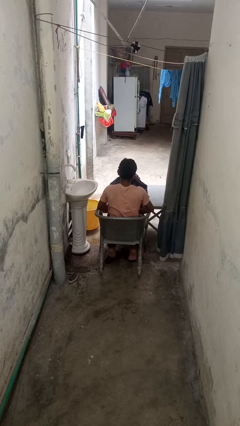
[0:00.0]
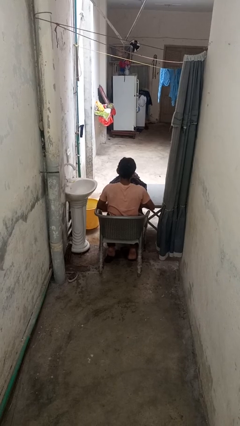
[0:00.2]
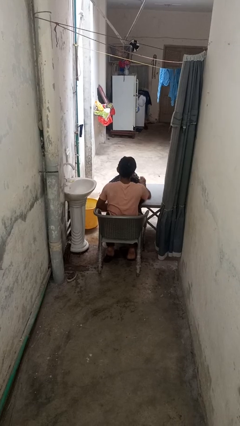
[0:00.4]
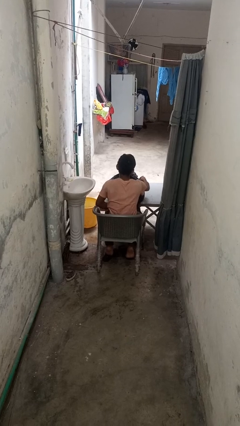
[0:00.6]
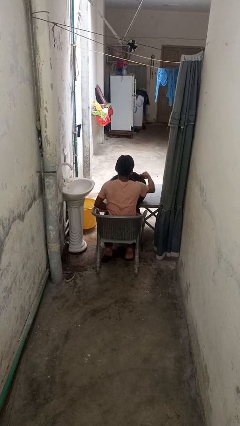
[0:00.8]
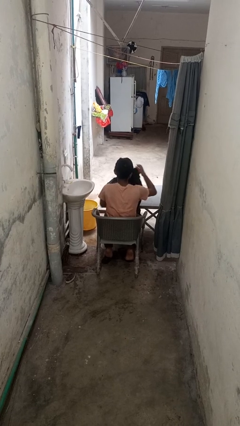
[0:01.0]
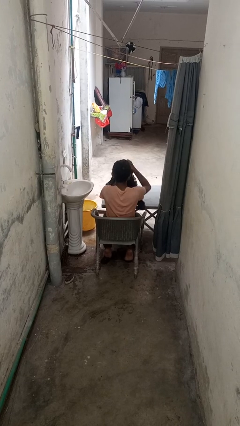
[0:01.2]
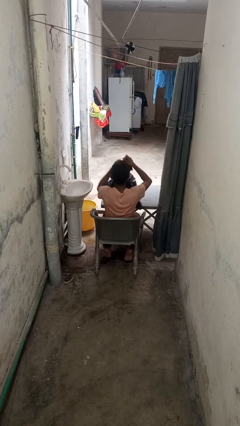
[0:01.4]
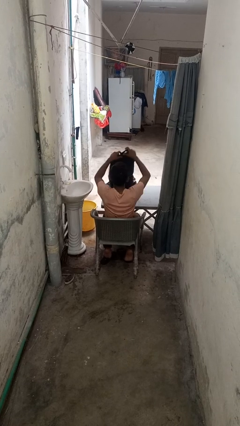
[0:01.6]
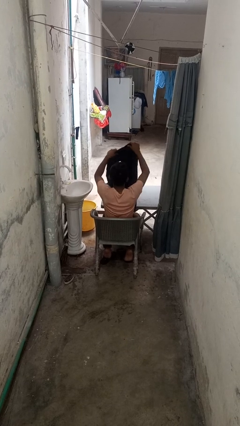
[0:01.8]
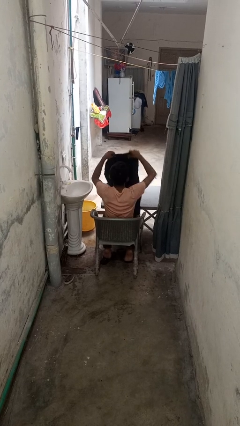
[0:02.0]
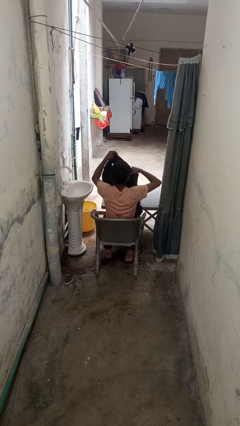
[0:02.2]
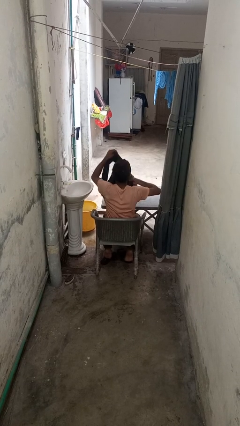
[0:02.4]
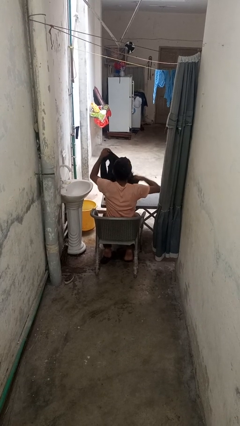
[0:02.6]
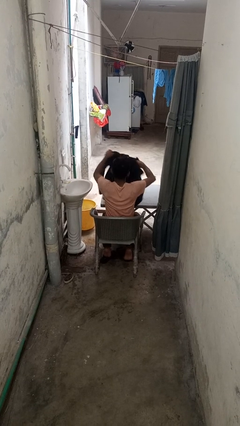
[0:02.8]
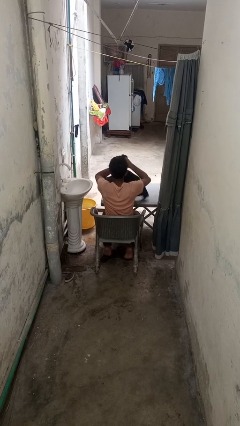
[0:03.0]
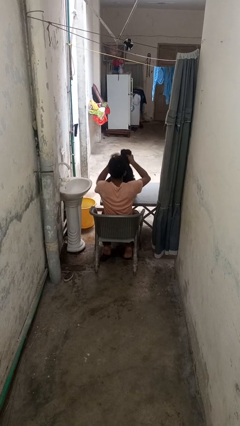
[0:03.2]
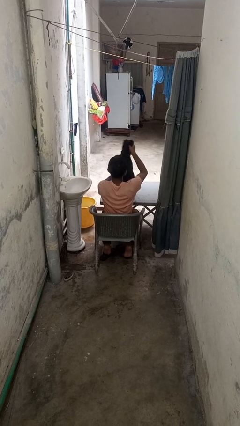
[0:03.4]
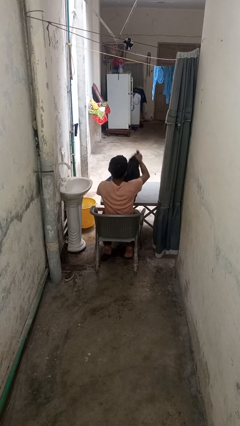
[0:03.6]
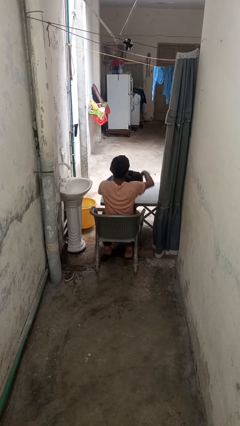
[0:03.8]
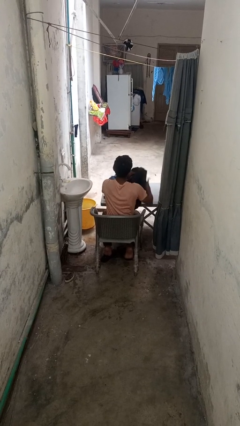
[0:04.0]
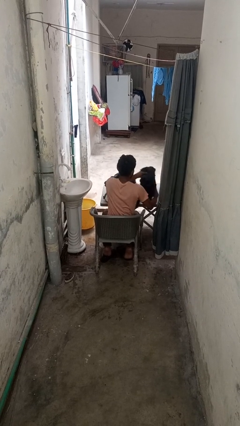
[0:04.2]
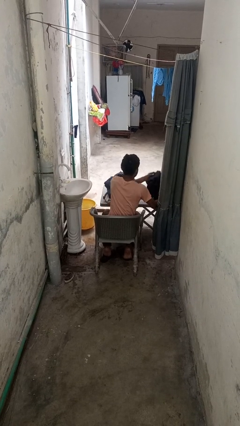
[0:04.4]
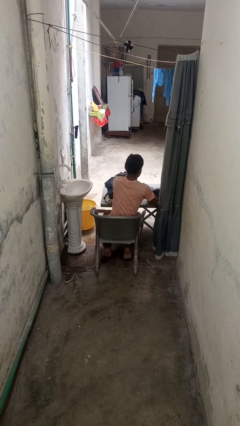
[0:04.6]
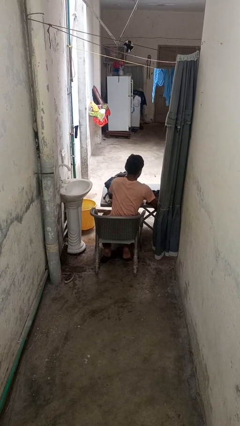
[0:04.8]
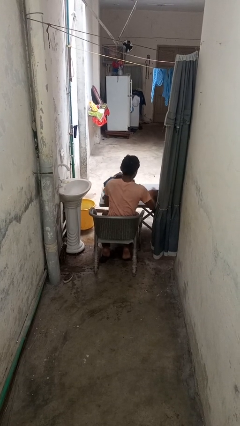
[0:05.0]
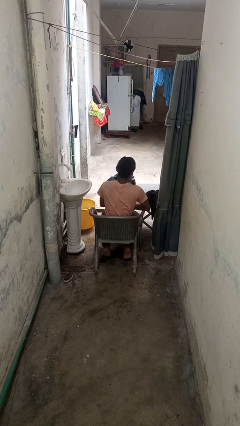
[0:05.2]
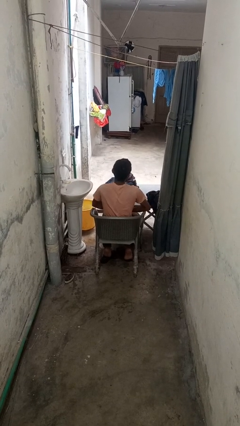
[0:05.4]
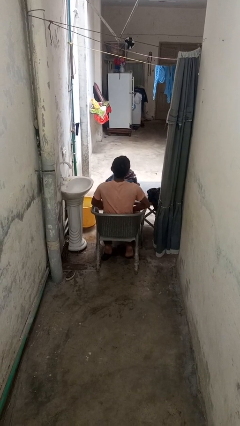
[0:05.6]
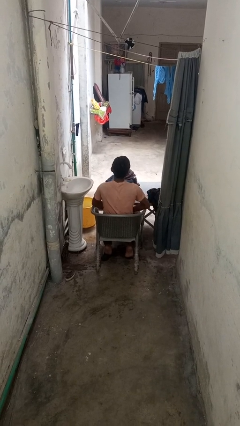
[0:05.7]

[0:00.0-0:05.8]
person folds shirt

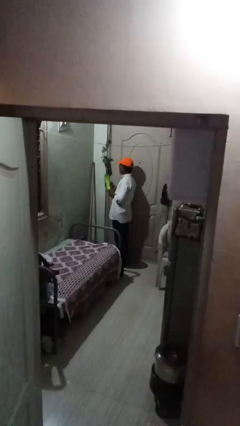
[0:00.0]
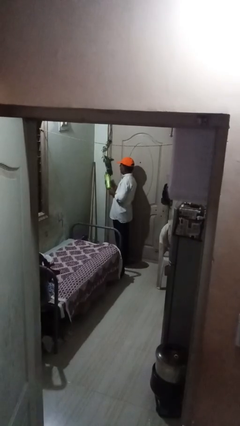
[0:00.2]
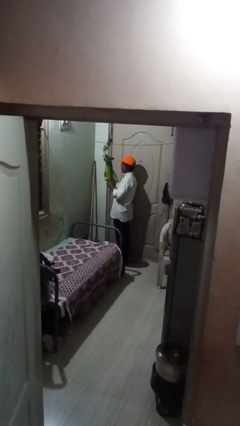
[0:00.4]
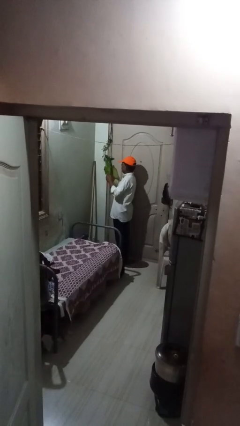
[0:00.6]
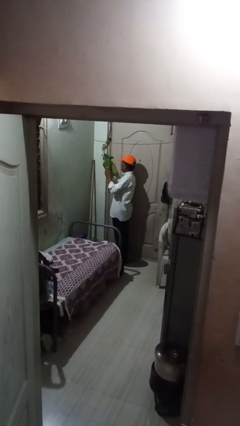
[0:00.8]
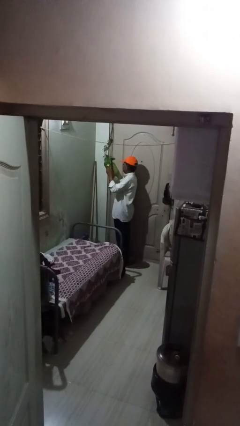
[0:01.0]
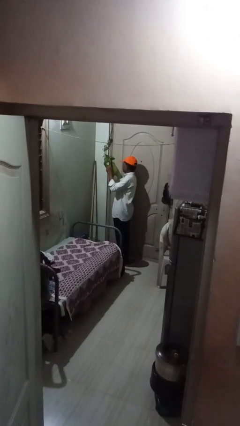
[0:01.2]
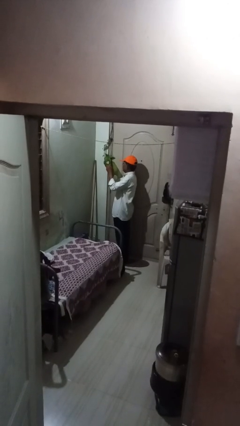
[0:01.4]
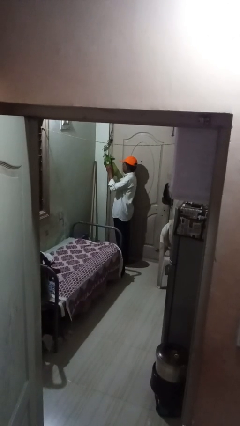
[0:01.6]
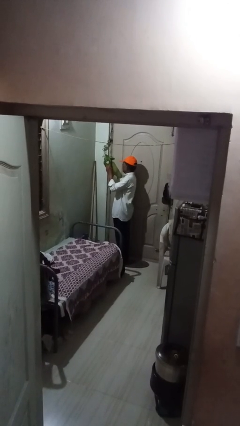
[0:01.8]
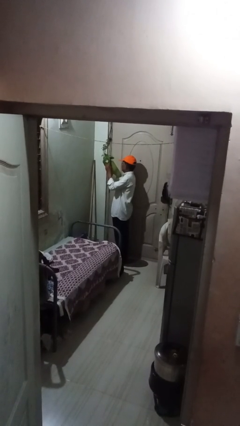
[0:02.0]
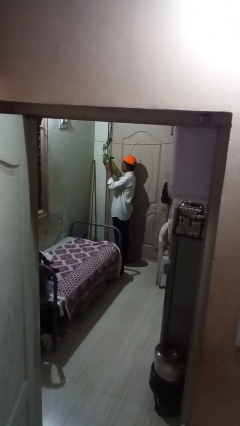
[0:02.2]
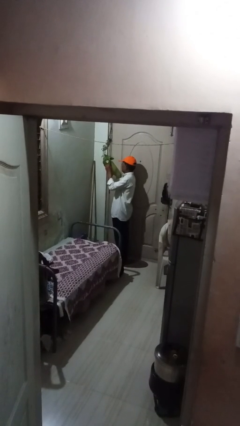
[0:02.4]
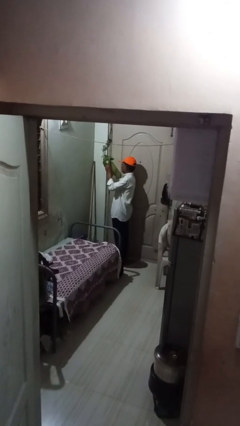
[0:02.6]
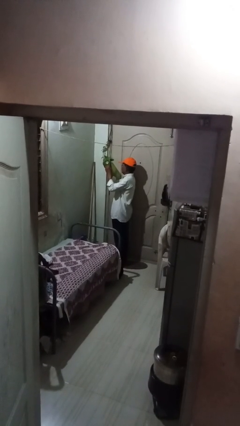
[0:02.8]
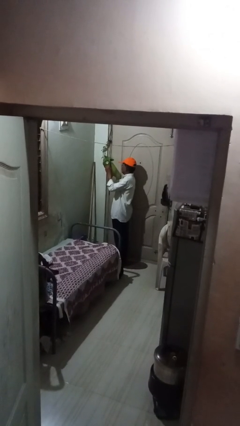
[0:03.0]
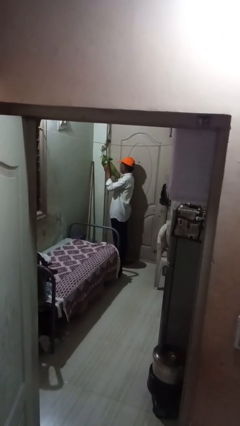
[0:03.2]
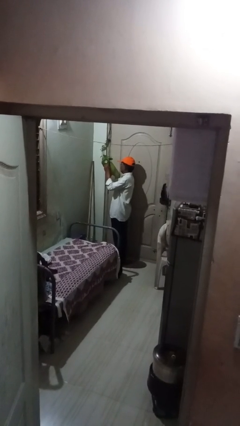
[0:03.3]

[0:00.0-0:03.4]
person waters houseplant

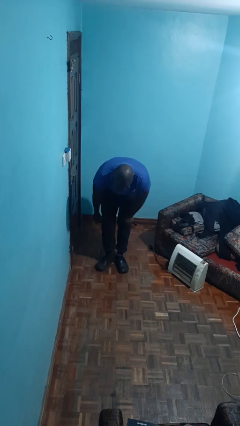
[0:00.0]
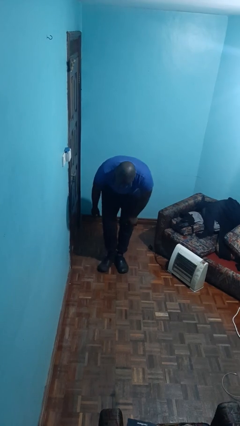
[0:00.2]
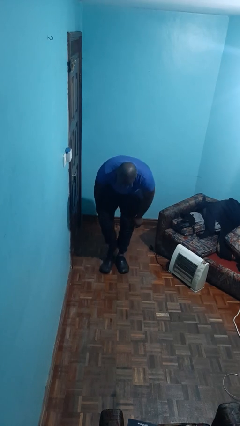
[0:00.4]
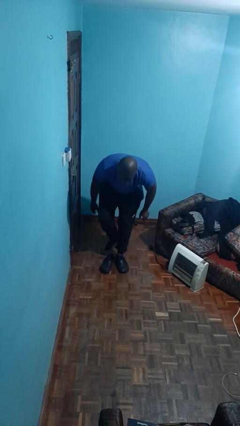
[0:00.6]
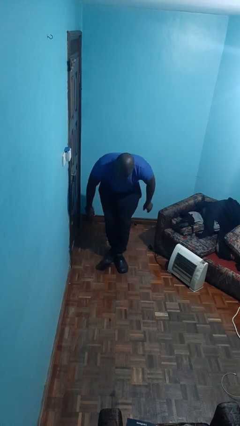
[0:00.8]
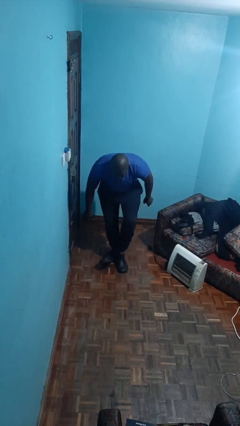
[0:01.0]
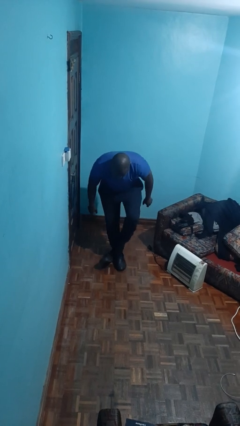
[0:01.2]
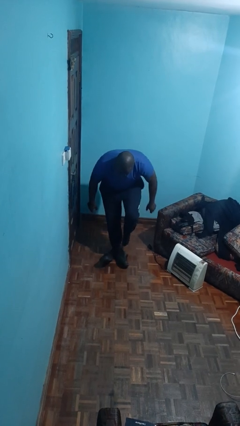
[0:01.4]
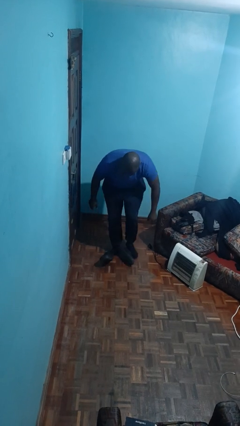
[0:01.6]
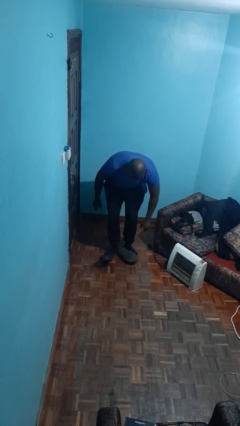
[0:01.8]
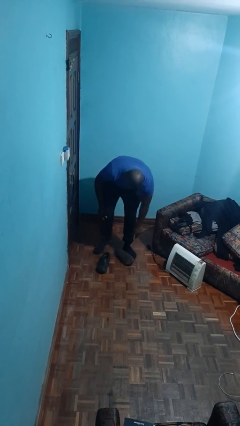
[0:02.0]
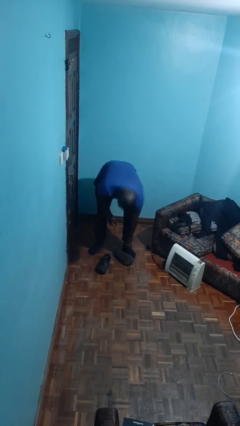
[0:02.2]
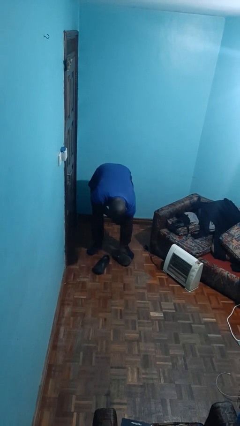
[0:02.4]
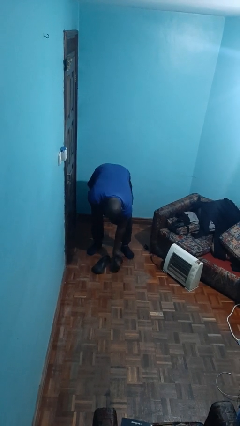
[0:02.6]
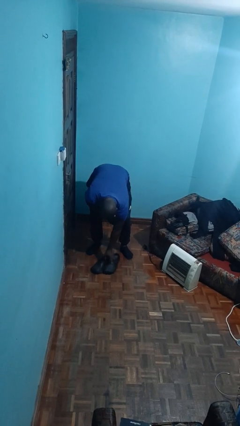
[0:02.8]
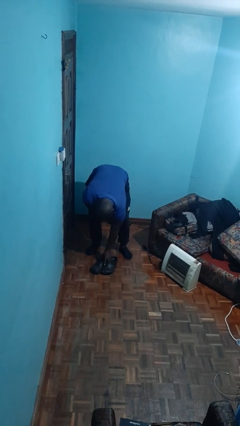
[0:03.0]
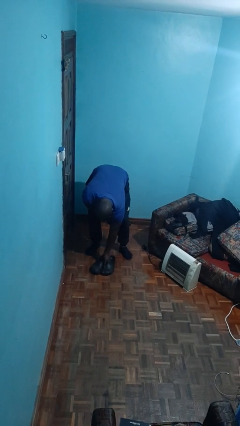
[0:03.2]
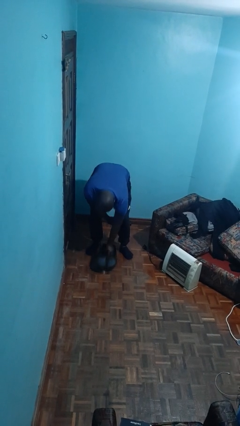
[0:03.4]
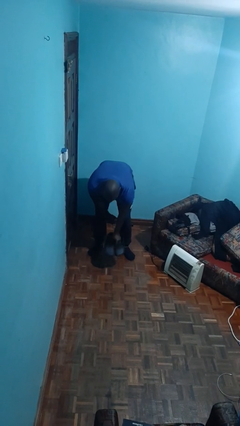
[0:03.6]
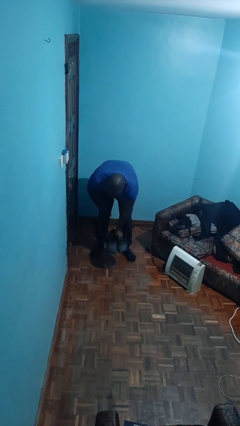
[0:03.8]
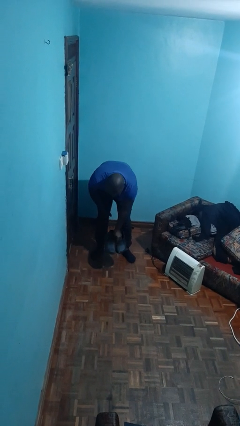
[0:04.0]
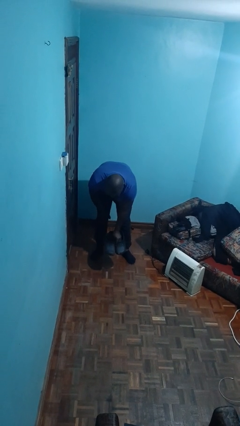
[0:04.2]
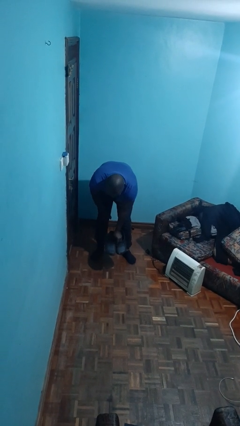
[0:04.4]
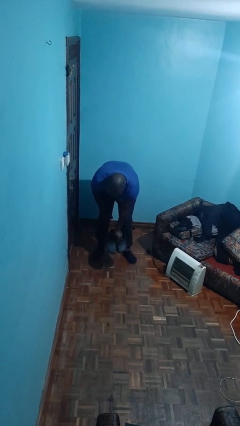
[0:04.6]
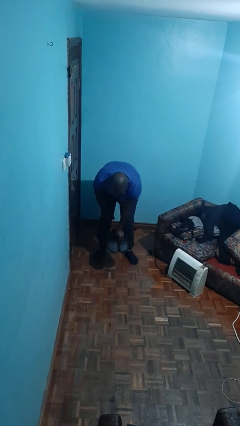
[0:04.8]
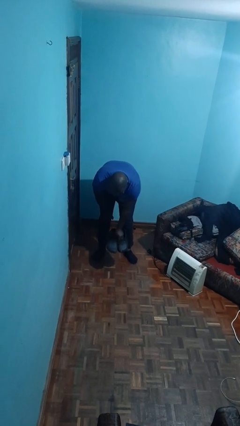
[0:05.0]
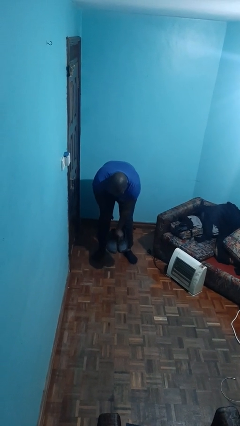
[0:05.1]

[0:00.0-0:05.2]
person takes off shoes

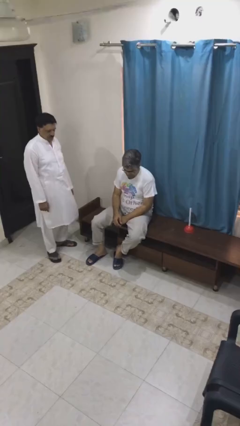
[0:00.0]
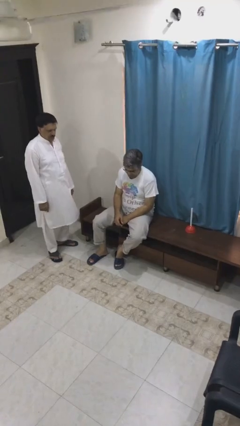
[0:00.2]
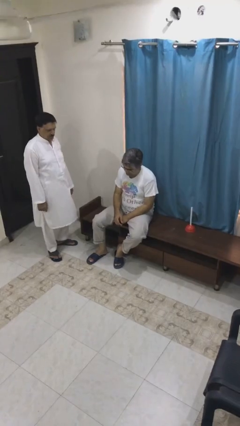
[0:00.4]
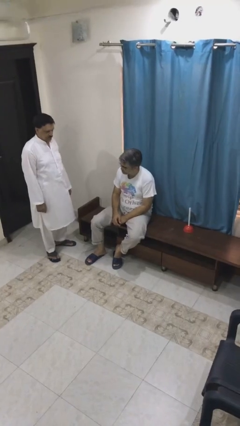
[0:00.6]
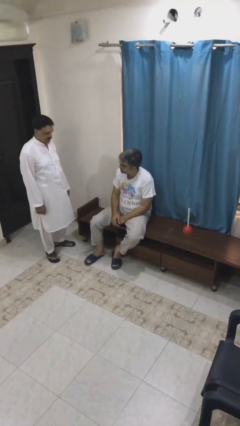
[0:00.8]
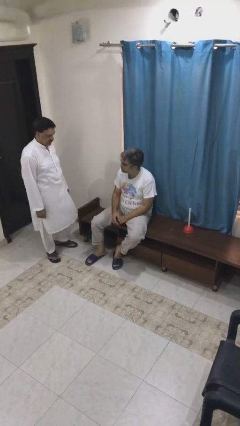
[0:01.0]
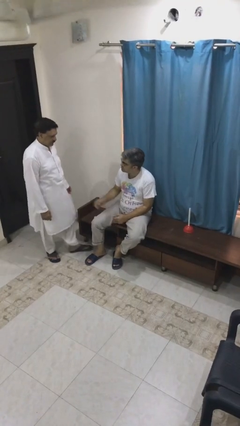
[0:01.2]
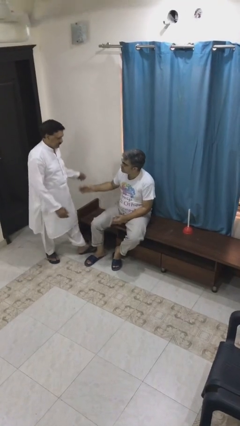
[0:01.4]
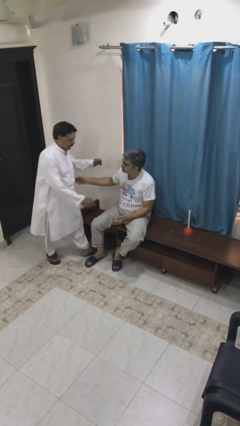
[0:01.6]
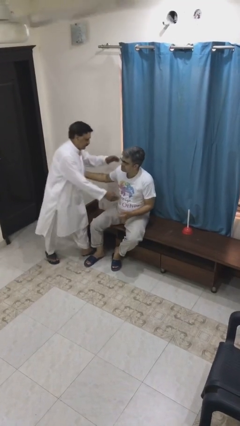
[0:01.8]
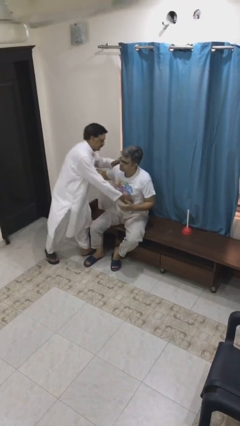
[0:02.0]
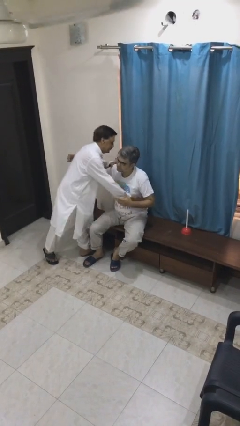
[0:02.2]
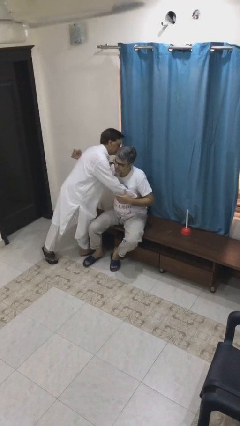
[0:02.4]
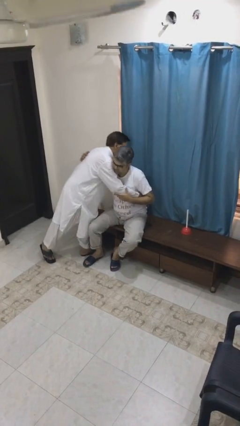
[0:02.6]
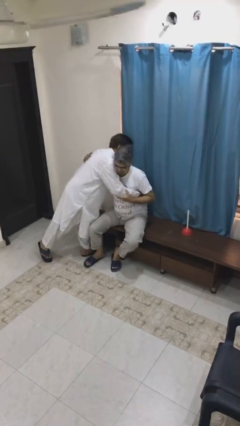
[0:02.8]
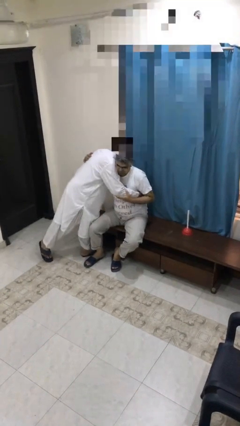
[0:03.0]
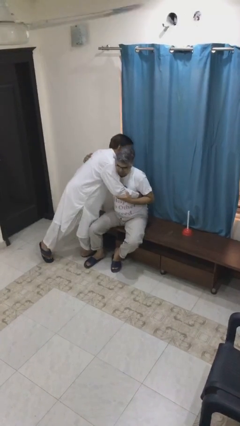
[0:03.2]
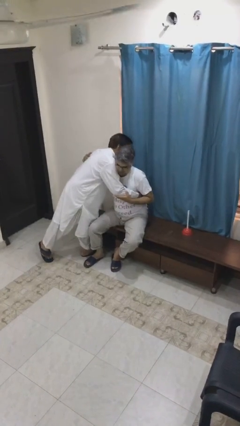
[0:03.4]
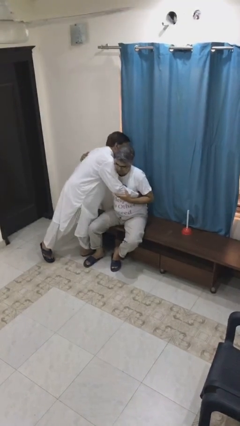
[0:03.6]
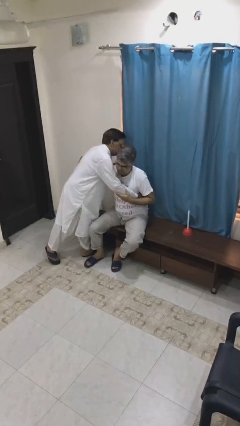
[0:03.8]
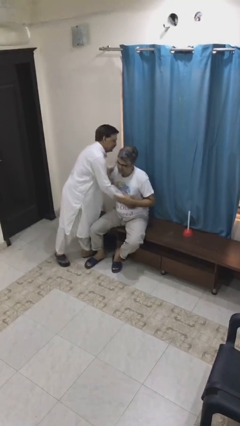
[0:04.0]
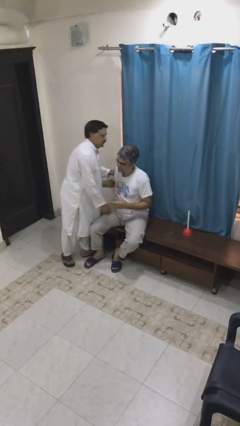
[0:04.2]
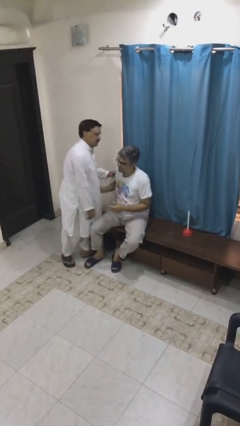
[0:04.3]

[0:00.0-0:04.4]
person embraces person
